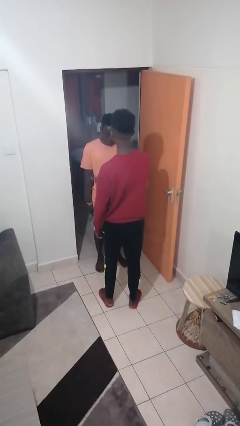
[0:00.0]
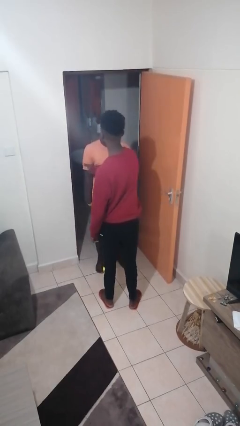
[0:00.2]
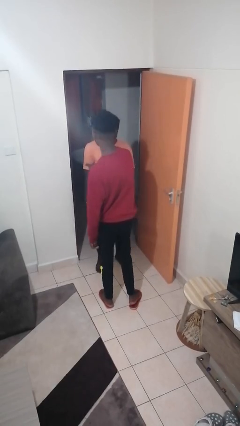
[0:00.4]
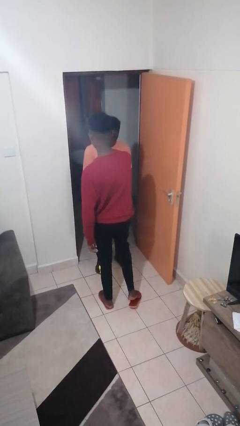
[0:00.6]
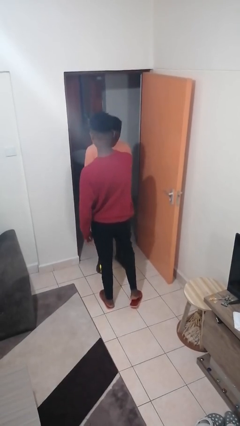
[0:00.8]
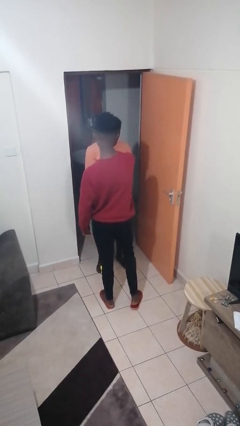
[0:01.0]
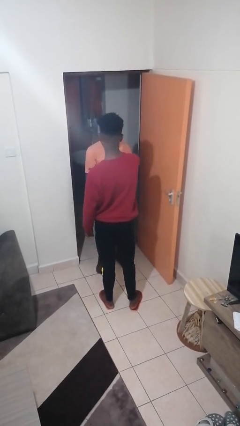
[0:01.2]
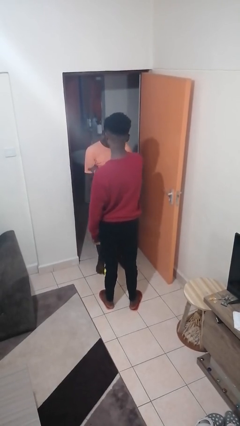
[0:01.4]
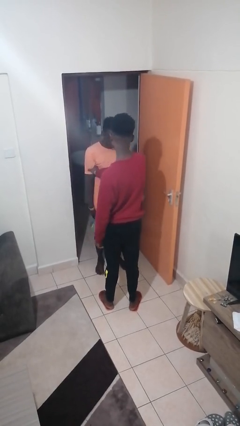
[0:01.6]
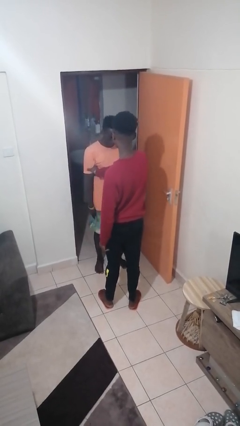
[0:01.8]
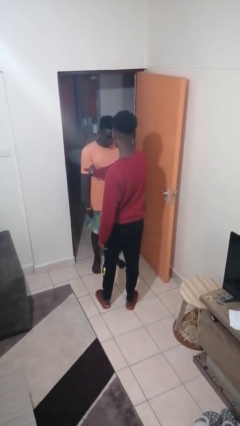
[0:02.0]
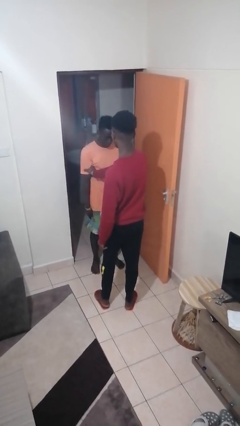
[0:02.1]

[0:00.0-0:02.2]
person grabs person by bicep

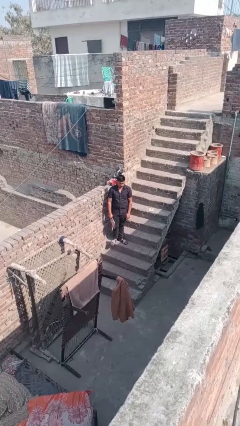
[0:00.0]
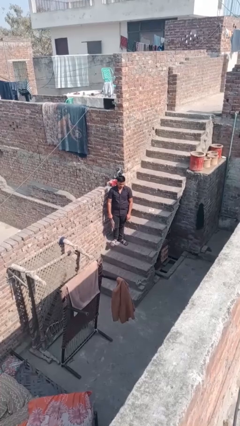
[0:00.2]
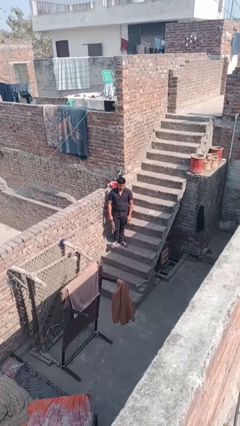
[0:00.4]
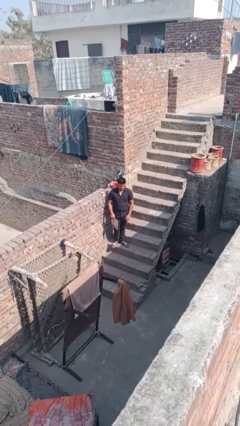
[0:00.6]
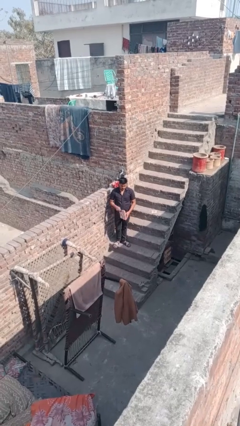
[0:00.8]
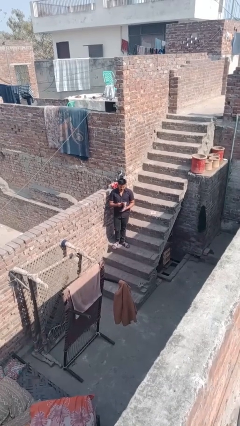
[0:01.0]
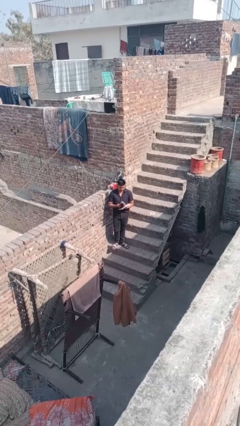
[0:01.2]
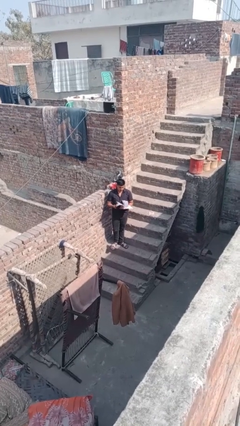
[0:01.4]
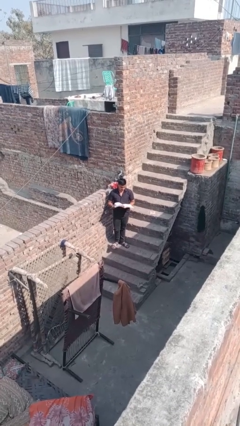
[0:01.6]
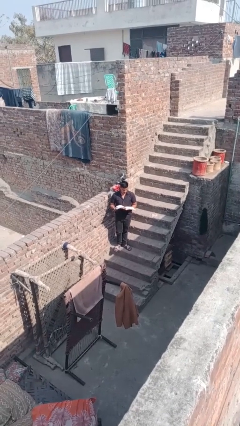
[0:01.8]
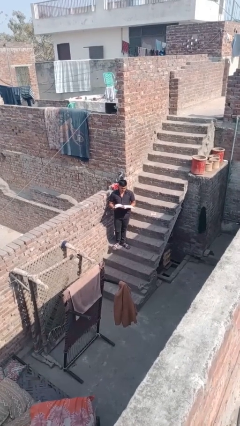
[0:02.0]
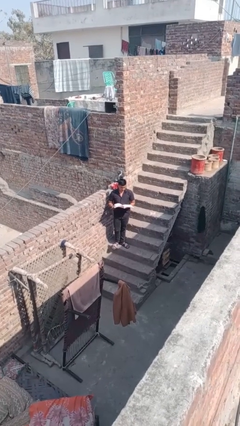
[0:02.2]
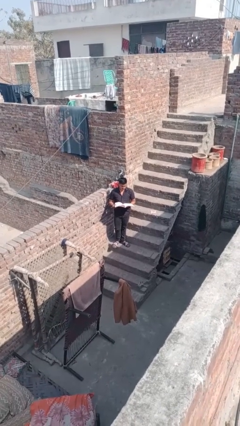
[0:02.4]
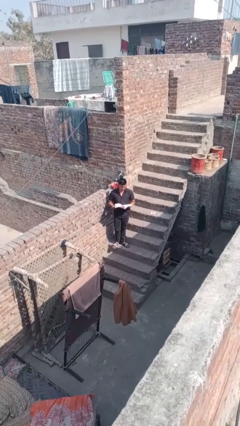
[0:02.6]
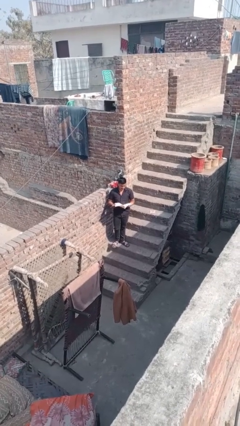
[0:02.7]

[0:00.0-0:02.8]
person reads document

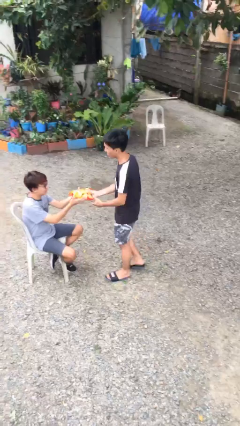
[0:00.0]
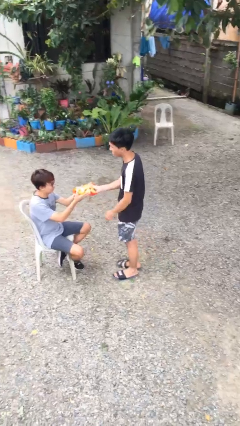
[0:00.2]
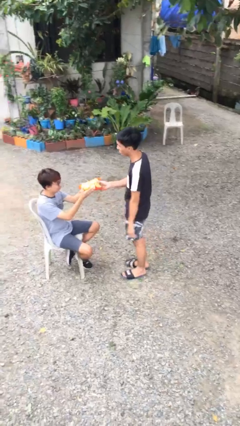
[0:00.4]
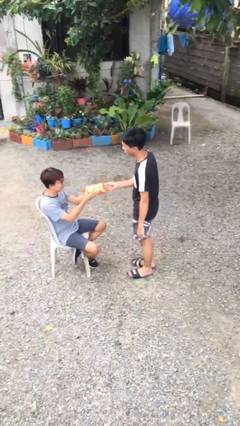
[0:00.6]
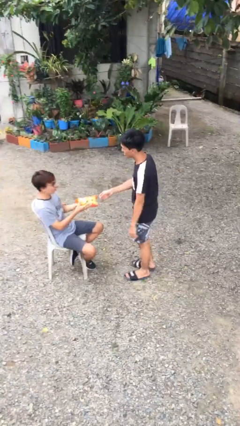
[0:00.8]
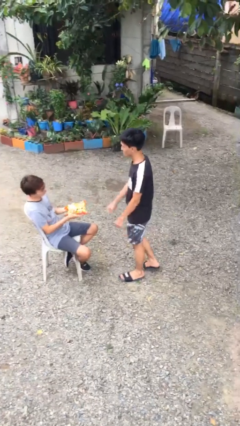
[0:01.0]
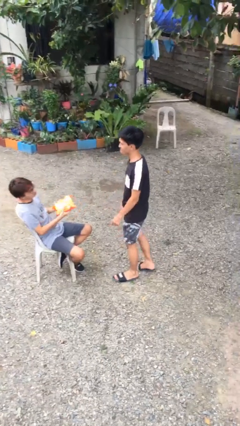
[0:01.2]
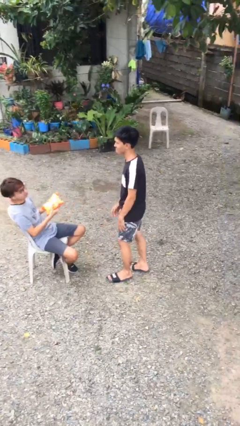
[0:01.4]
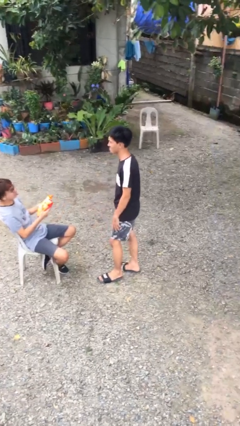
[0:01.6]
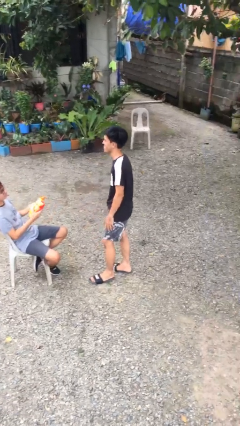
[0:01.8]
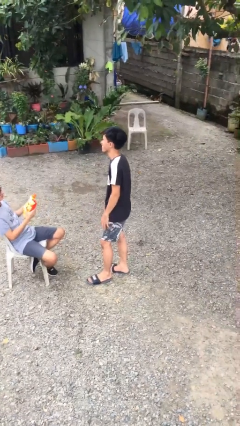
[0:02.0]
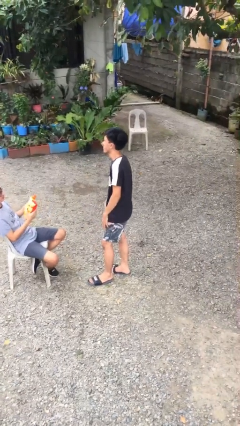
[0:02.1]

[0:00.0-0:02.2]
person transfers object to person

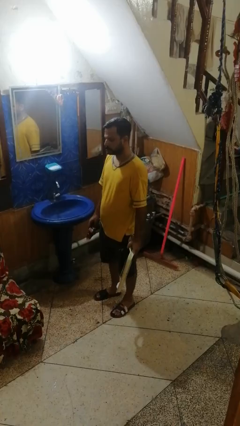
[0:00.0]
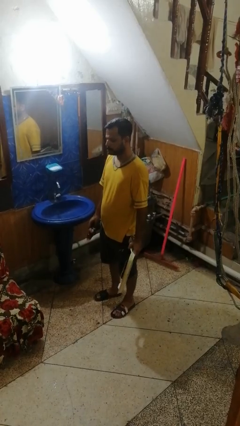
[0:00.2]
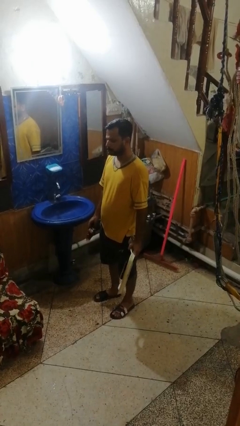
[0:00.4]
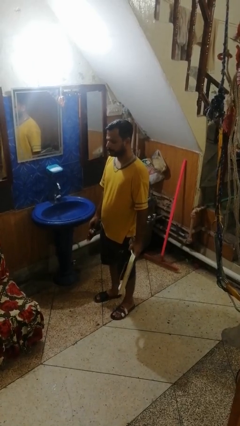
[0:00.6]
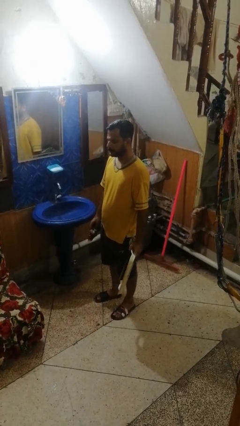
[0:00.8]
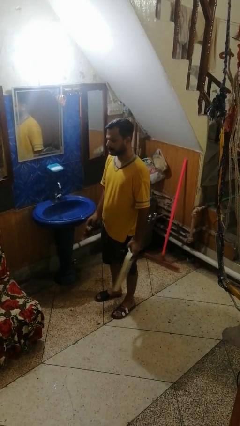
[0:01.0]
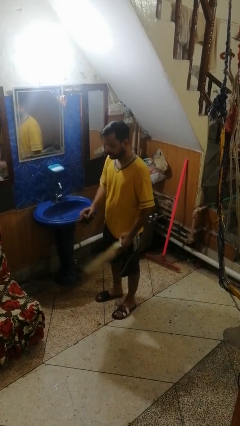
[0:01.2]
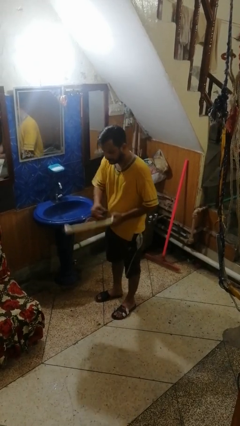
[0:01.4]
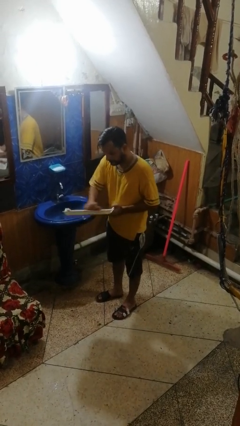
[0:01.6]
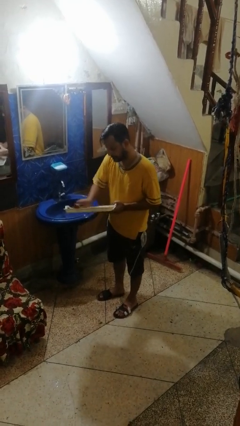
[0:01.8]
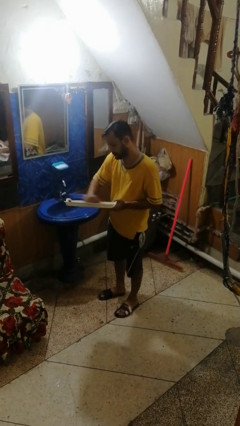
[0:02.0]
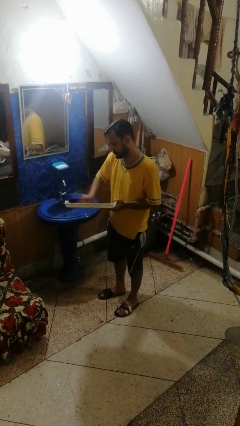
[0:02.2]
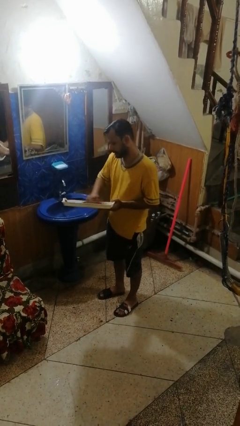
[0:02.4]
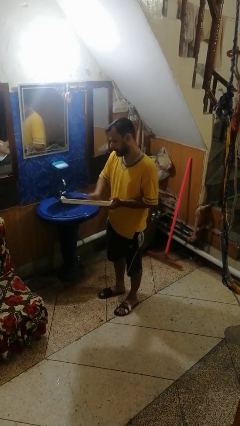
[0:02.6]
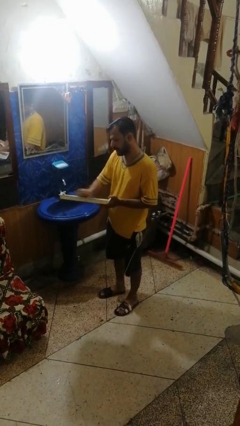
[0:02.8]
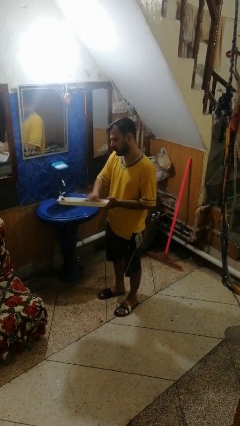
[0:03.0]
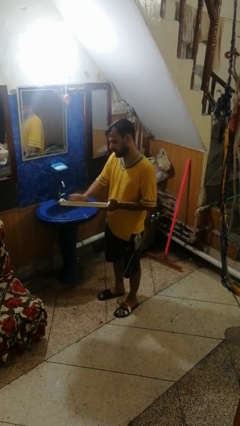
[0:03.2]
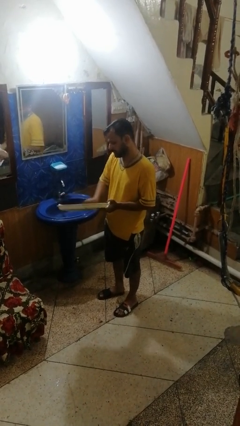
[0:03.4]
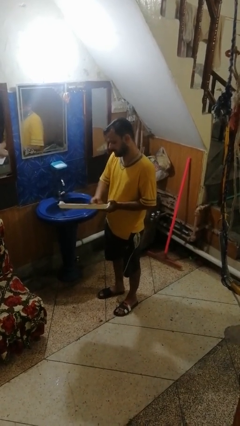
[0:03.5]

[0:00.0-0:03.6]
person dries dish

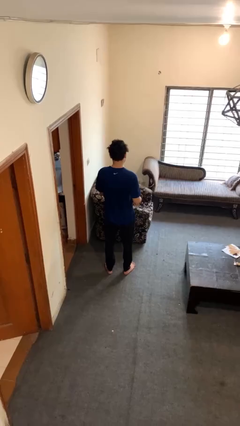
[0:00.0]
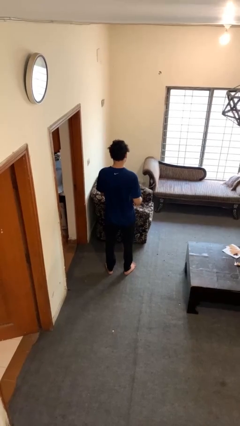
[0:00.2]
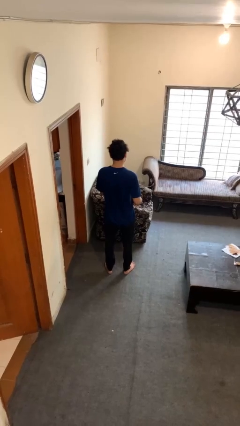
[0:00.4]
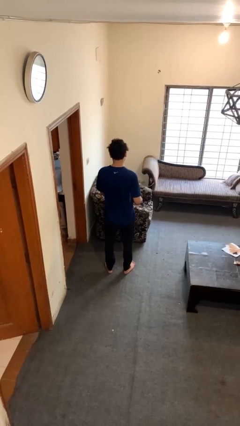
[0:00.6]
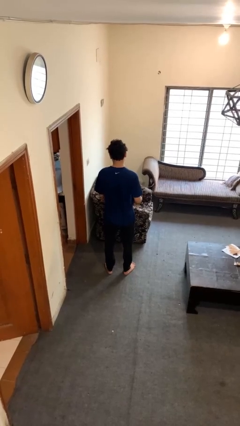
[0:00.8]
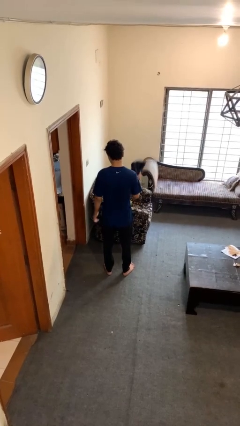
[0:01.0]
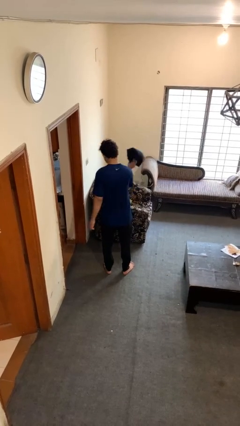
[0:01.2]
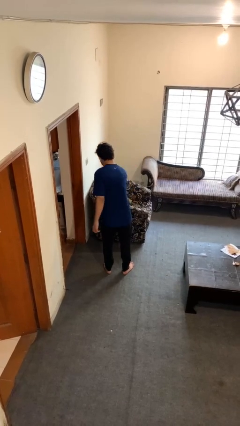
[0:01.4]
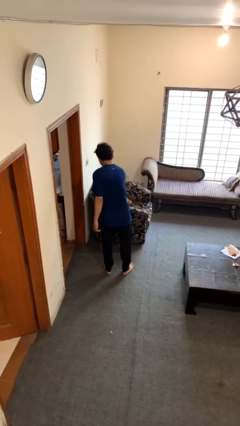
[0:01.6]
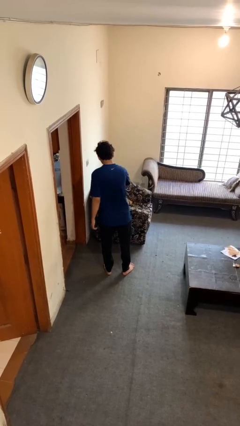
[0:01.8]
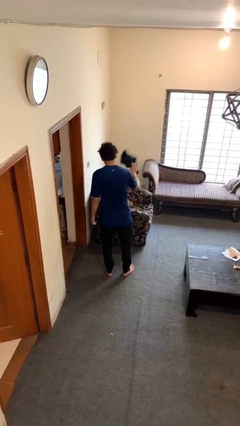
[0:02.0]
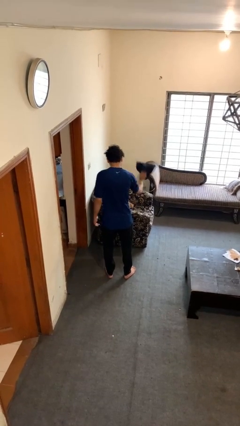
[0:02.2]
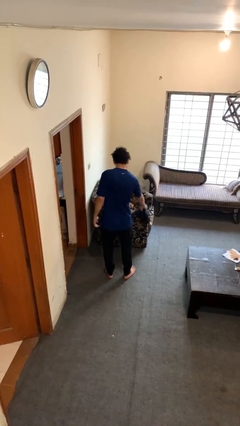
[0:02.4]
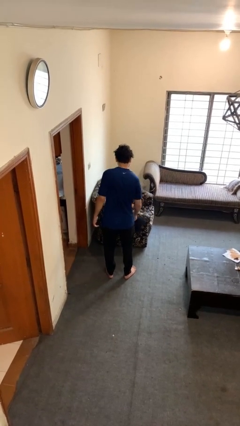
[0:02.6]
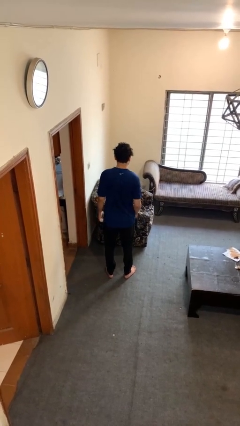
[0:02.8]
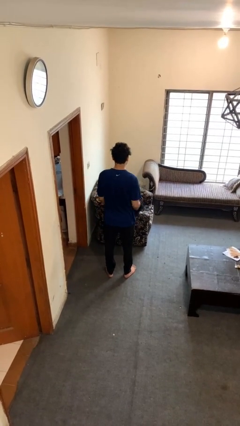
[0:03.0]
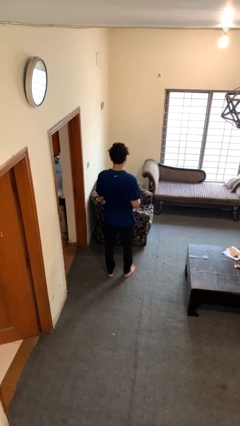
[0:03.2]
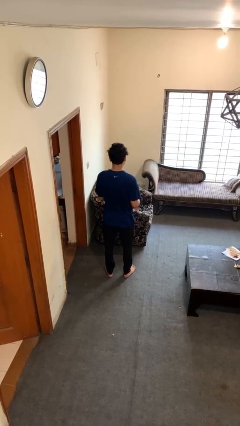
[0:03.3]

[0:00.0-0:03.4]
person dusts furniture

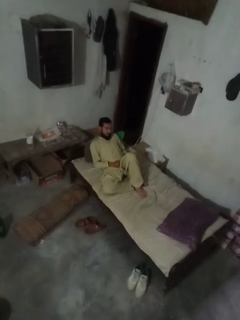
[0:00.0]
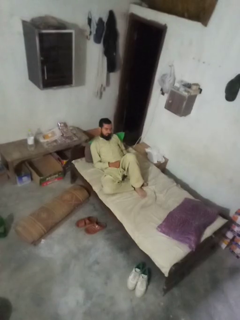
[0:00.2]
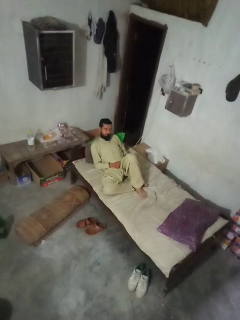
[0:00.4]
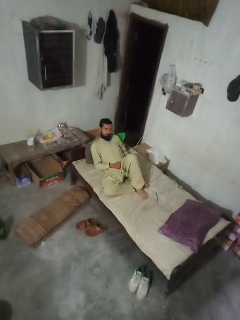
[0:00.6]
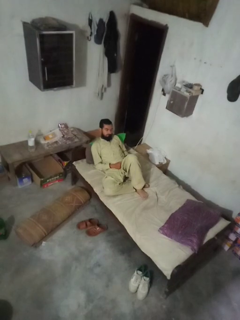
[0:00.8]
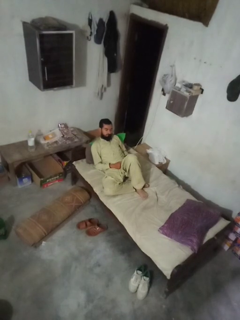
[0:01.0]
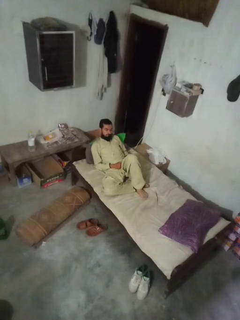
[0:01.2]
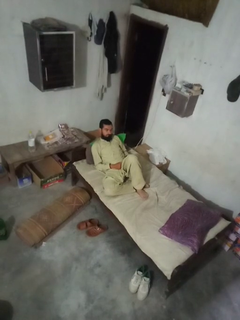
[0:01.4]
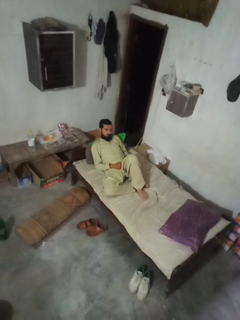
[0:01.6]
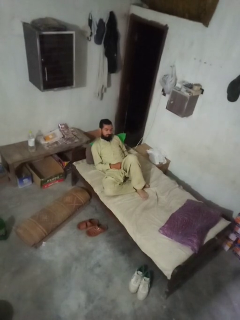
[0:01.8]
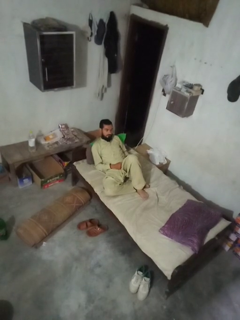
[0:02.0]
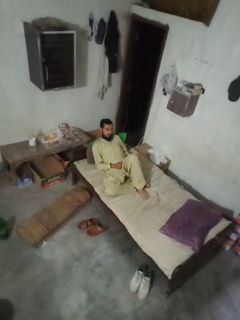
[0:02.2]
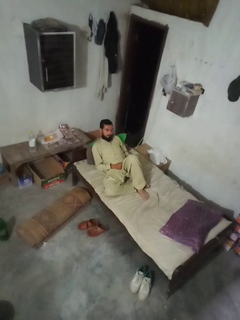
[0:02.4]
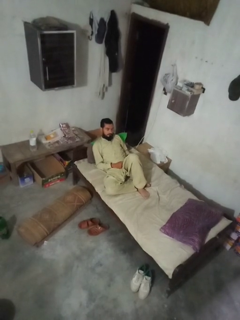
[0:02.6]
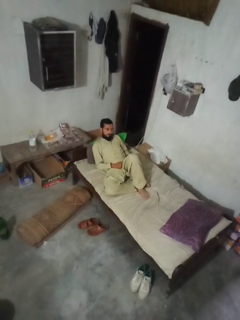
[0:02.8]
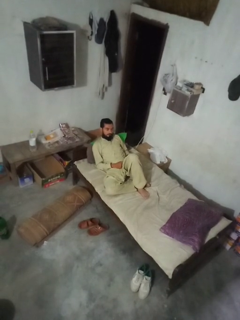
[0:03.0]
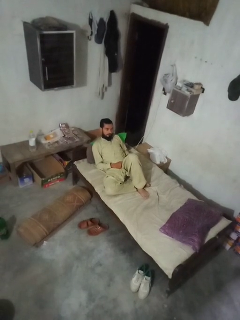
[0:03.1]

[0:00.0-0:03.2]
person strokes chin

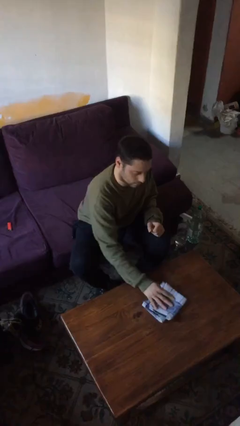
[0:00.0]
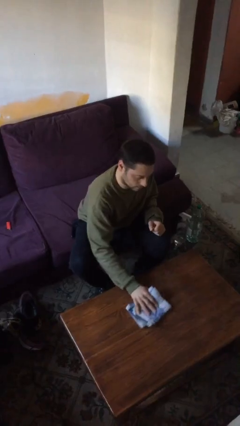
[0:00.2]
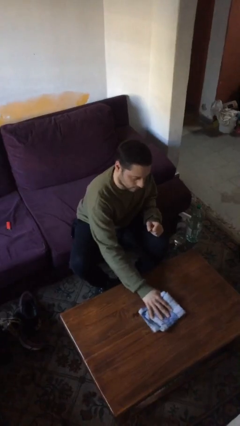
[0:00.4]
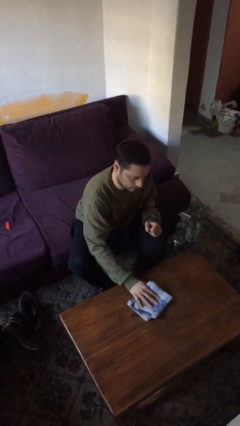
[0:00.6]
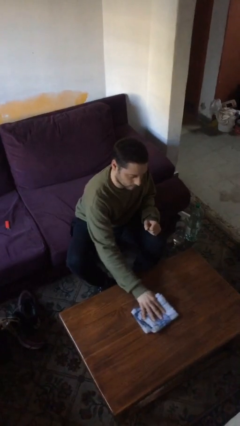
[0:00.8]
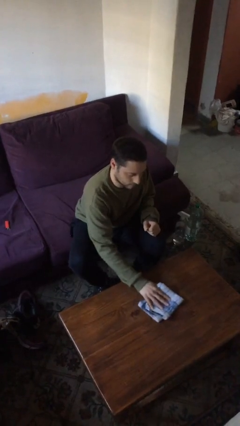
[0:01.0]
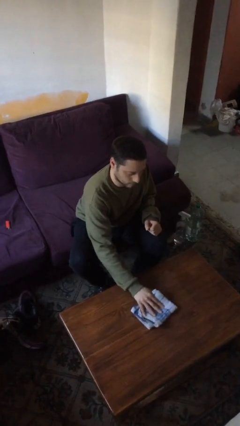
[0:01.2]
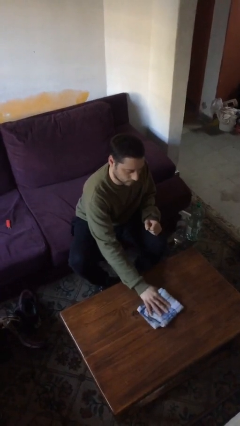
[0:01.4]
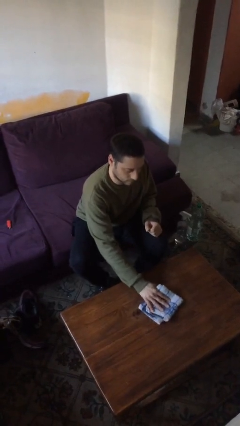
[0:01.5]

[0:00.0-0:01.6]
person cleans table with rag
